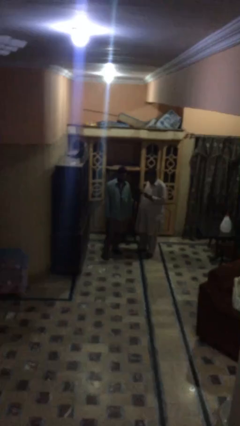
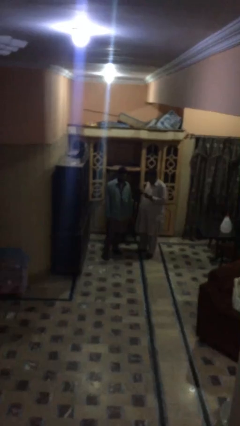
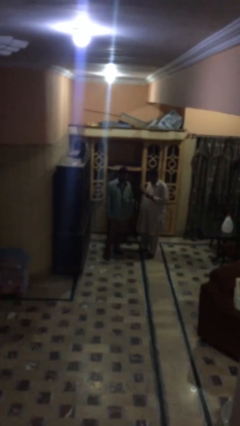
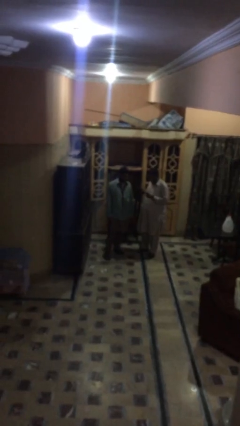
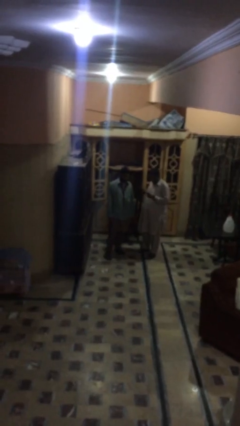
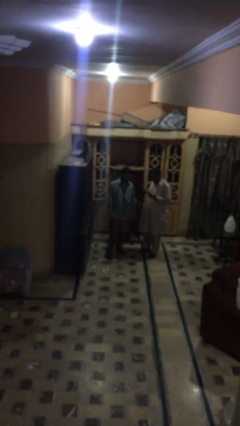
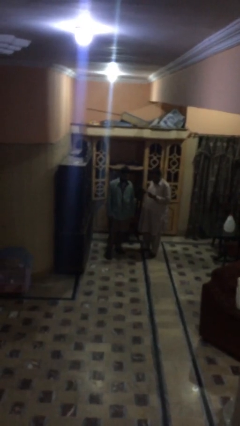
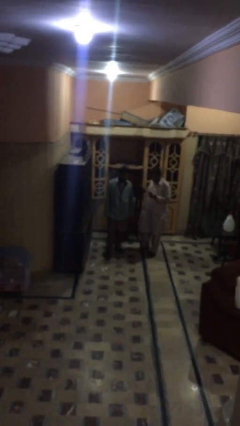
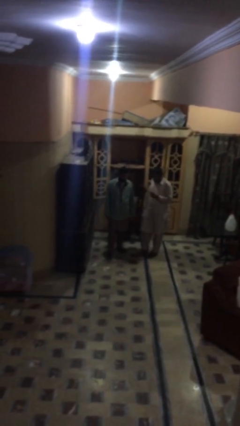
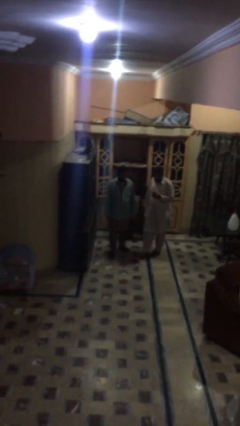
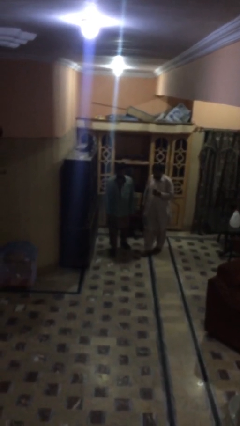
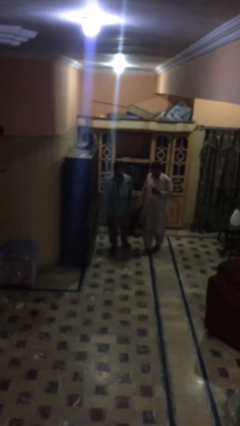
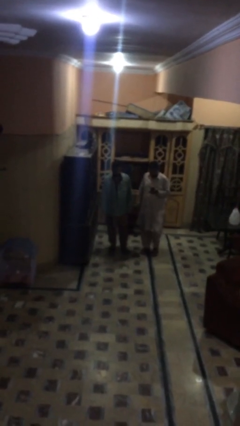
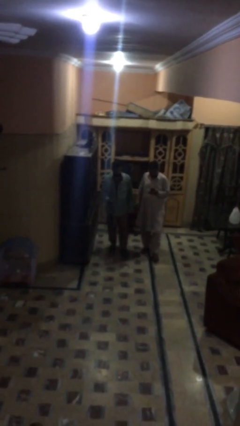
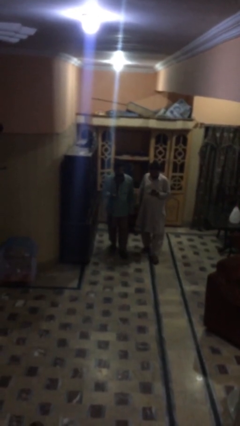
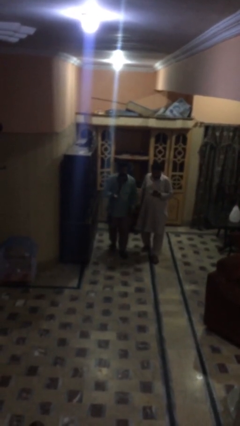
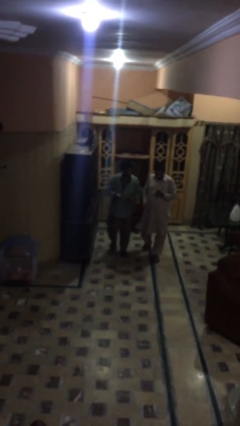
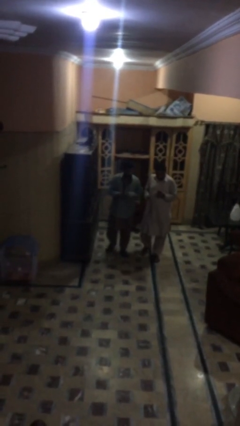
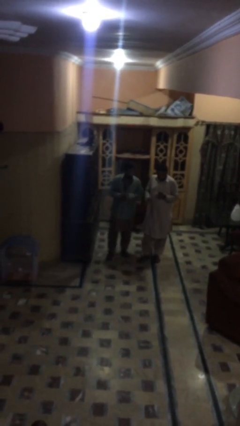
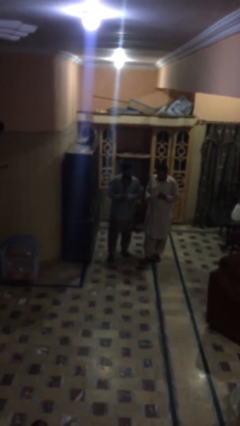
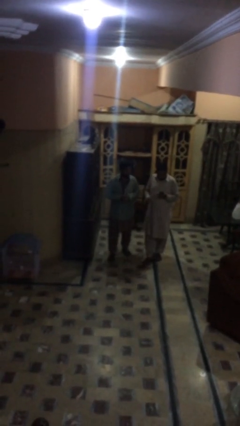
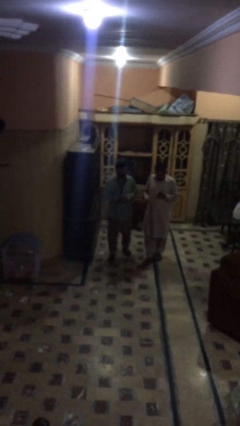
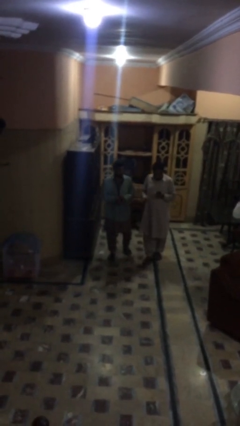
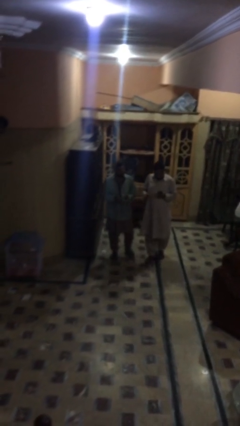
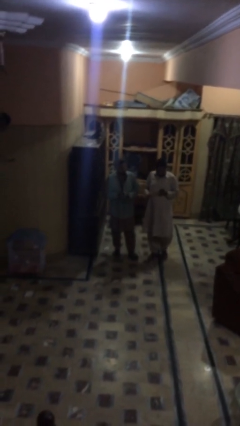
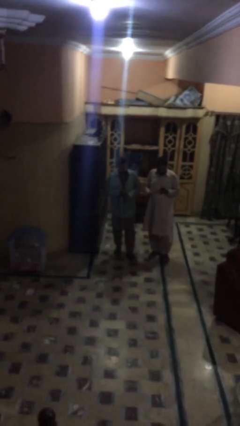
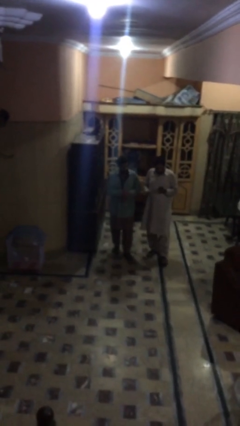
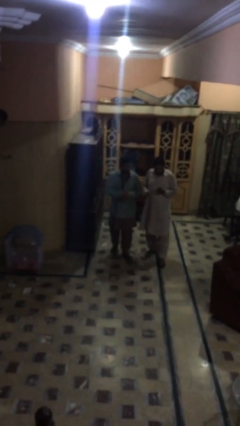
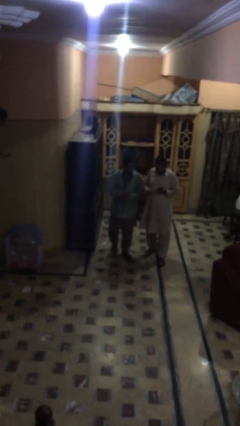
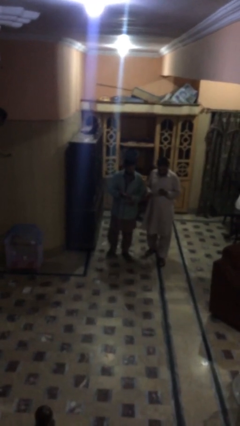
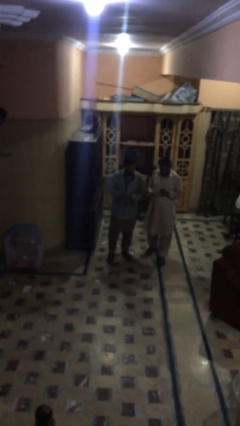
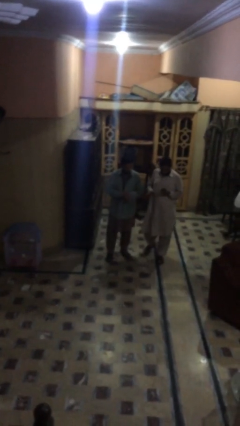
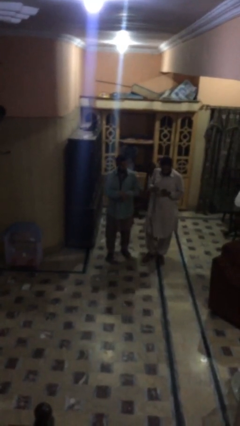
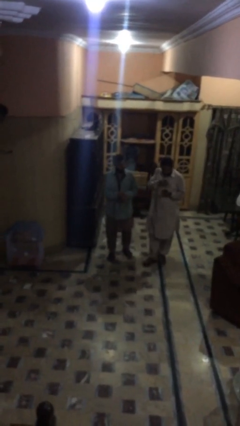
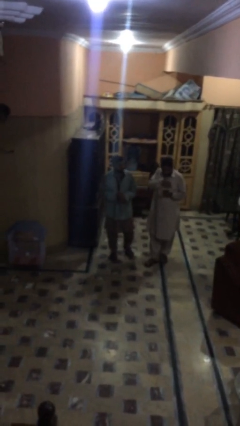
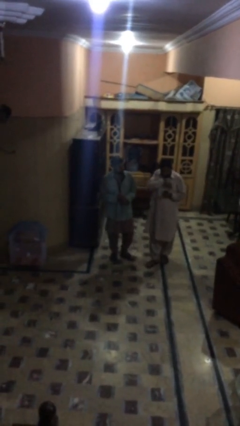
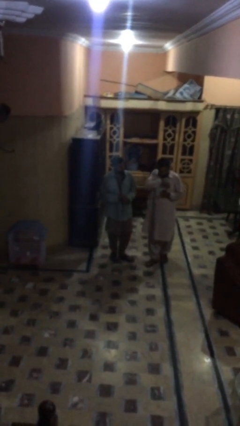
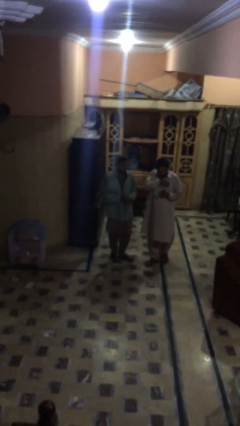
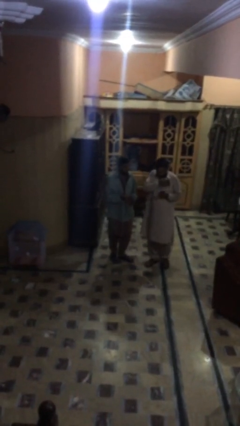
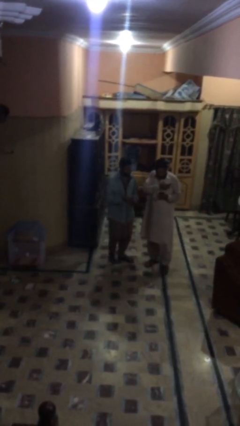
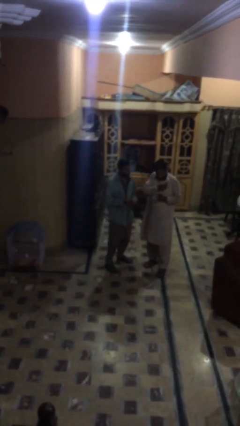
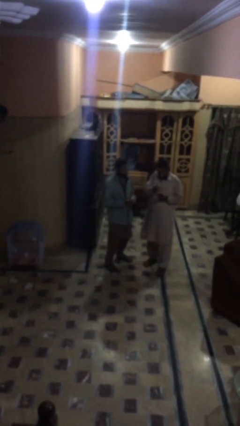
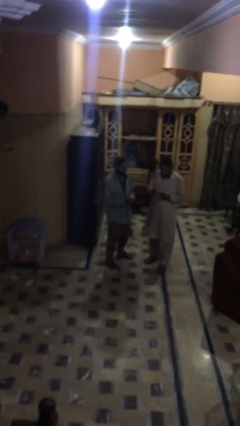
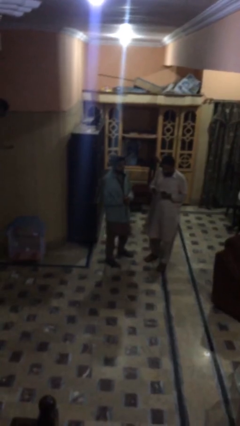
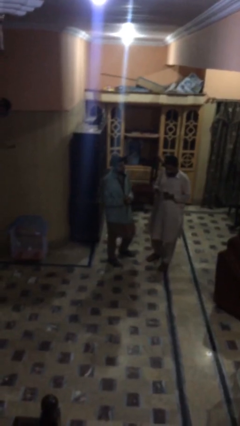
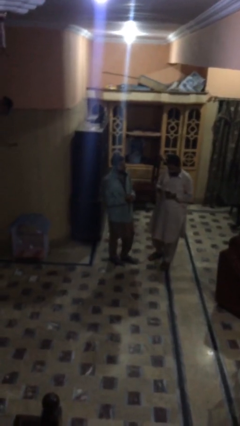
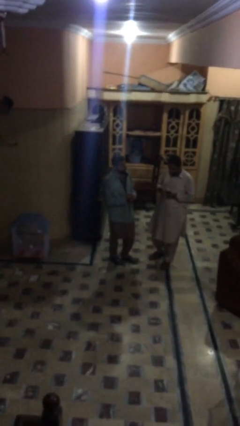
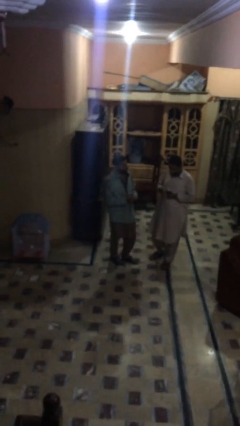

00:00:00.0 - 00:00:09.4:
person talks to person

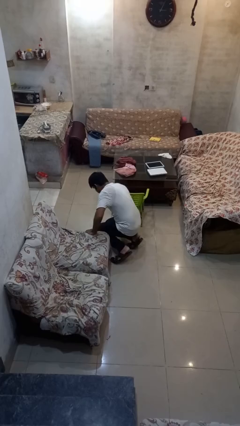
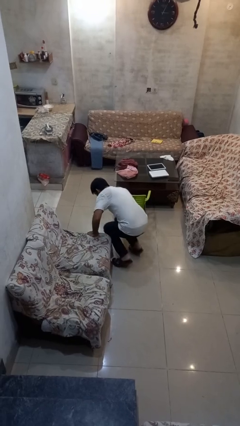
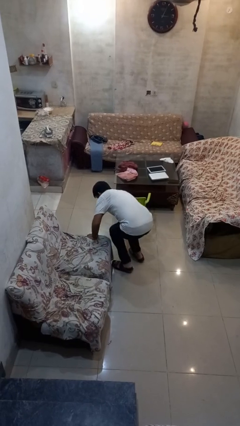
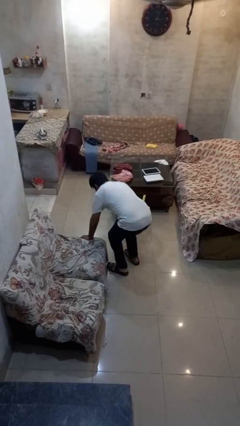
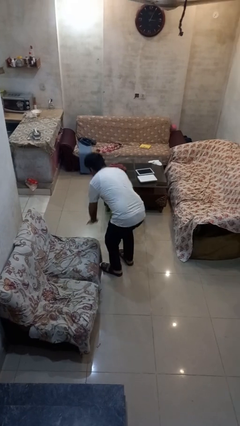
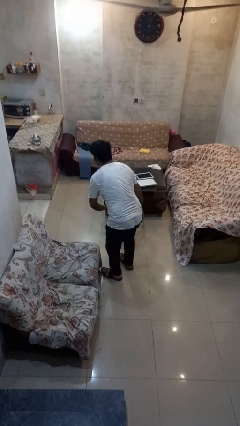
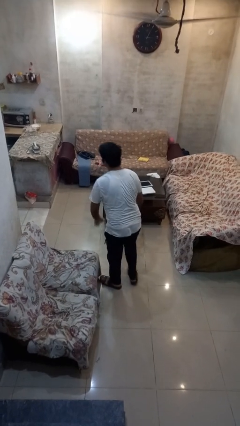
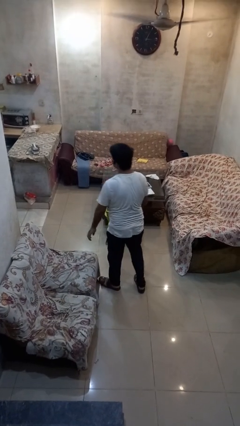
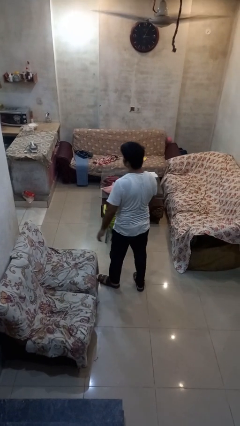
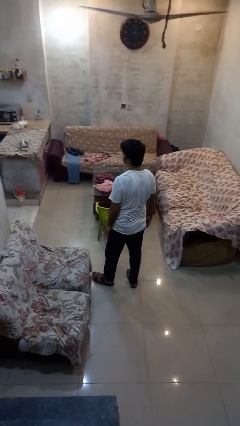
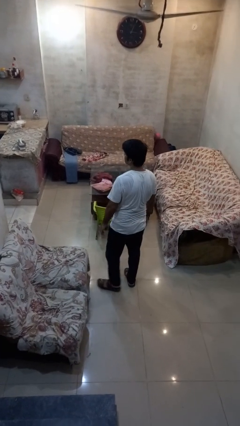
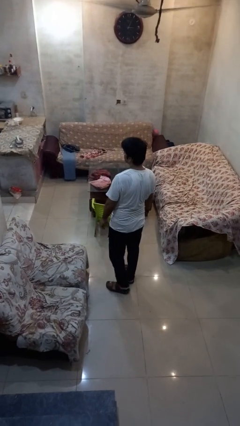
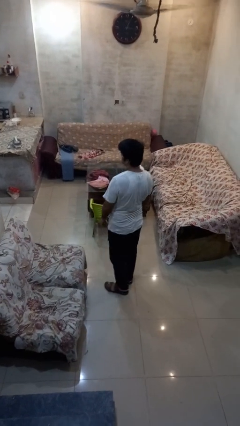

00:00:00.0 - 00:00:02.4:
person stands up from floor

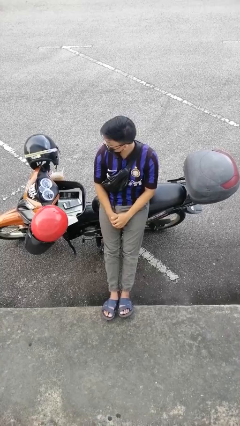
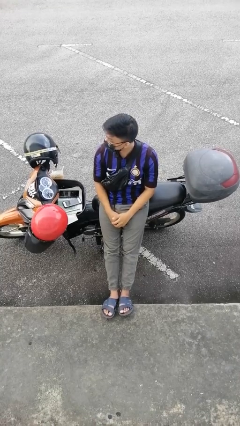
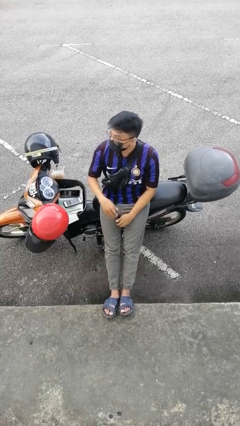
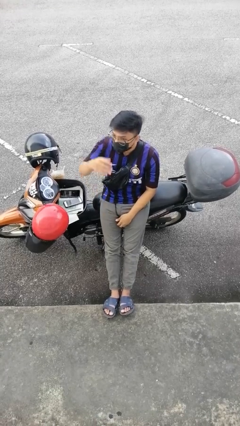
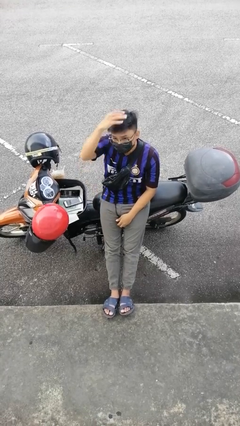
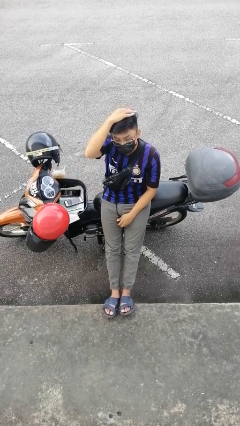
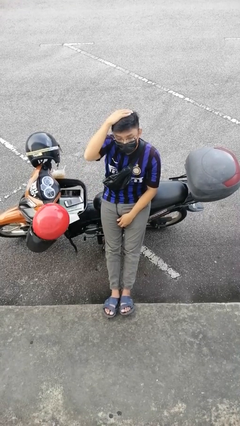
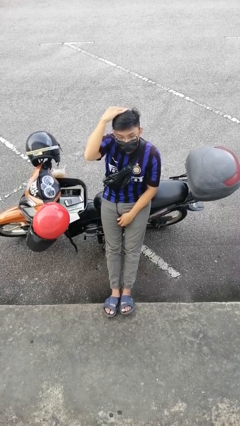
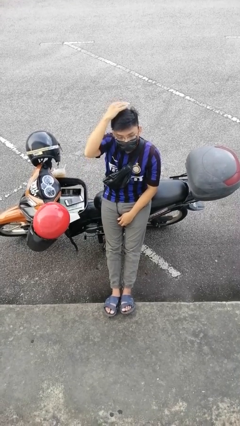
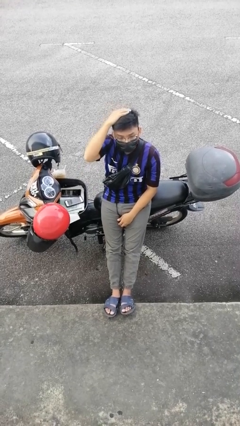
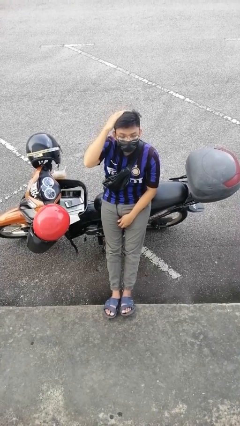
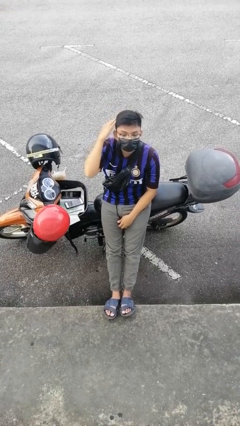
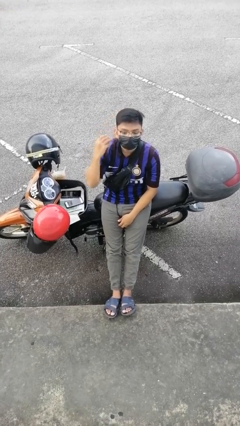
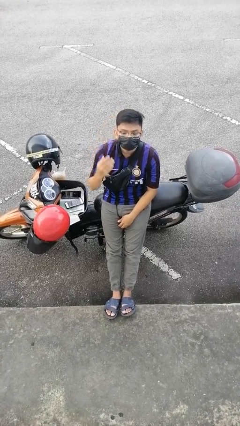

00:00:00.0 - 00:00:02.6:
person pats head

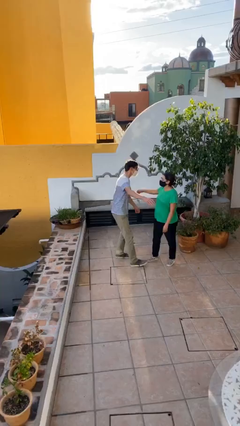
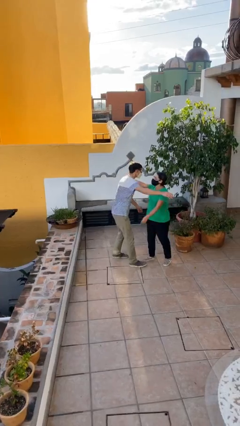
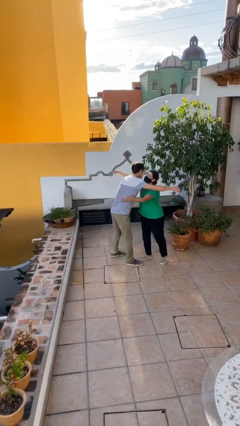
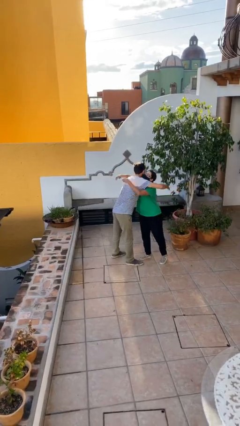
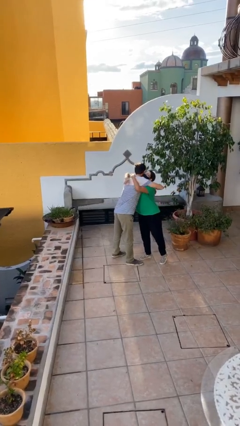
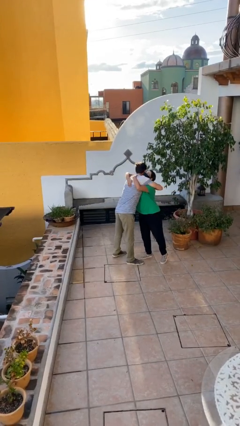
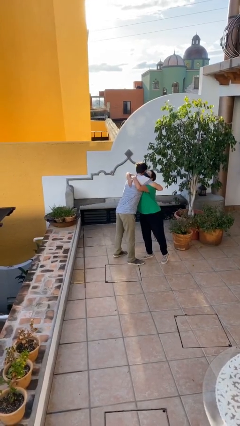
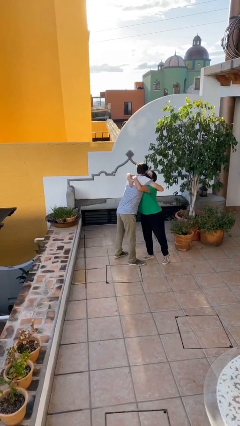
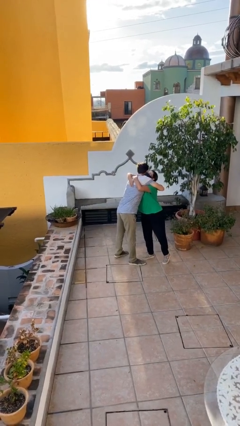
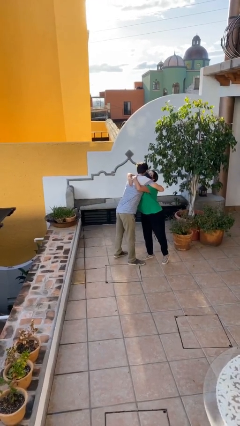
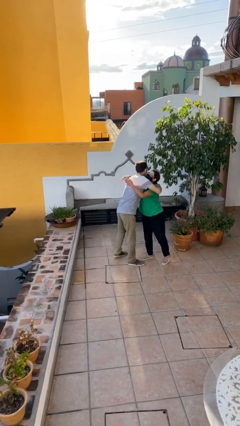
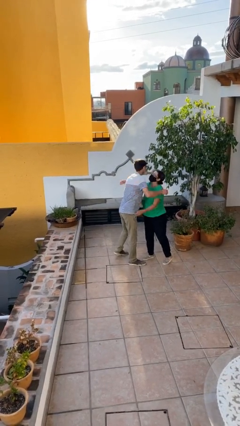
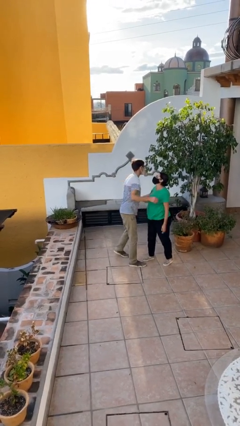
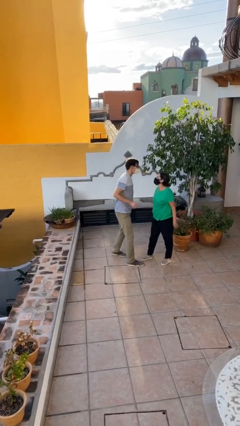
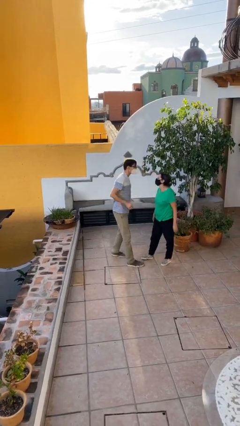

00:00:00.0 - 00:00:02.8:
person embraces person

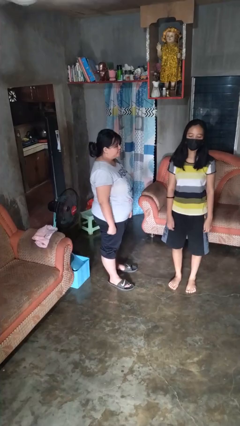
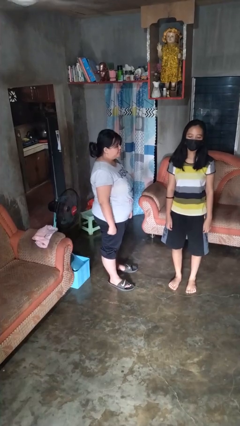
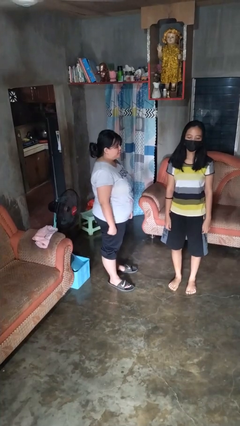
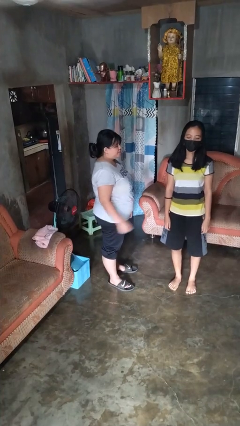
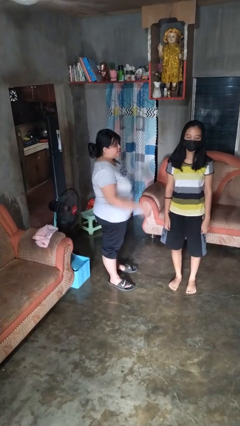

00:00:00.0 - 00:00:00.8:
person grabs person by bicep
